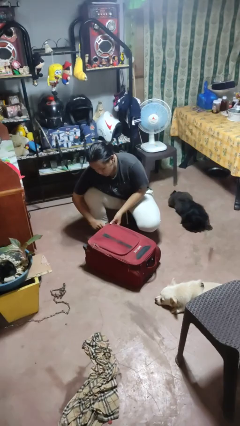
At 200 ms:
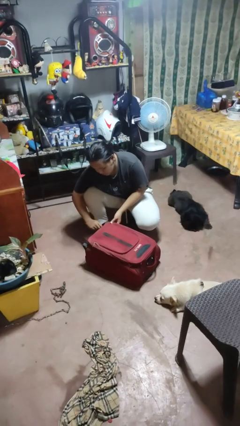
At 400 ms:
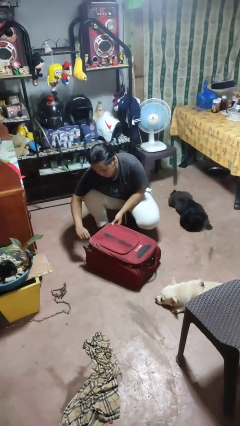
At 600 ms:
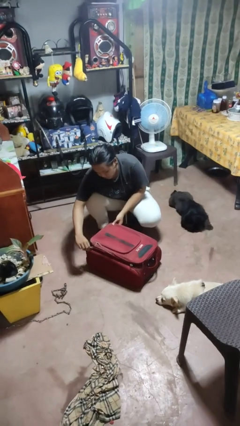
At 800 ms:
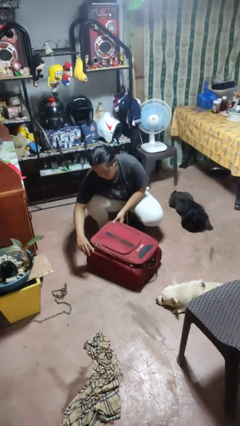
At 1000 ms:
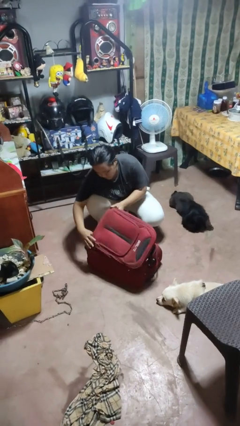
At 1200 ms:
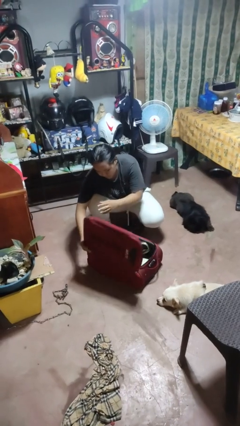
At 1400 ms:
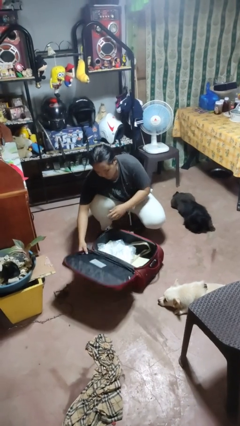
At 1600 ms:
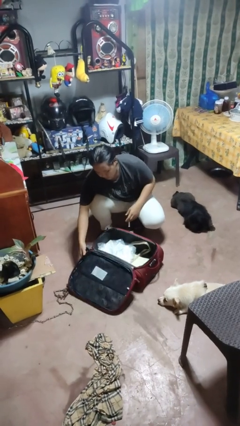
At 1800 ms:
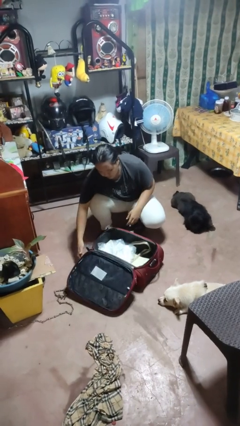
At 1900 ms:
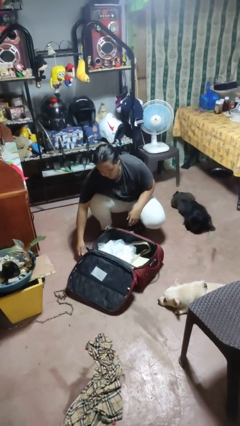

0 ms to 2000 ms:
person opens suitcase

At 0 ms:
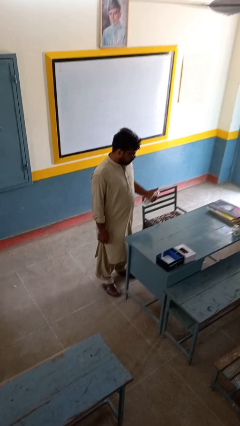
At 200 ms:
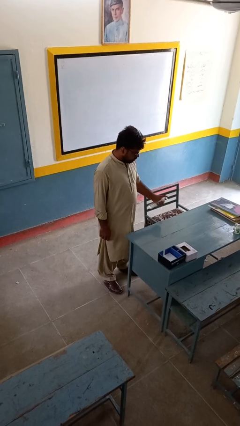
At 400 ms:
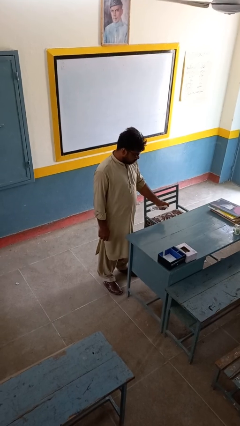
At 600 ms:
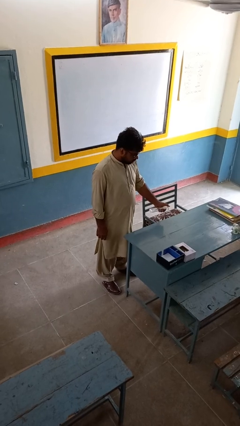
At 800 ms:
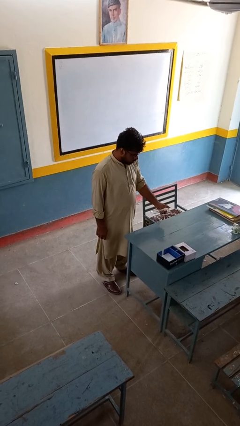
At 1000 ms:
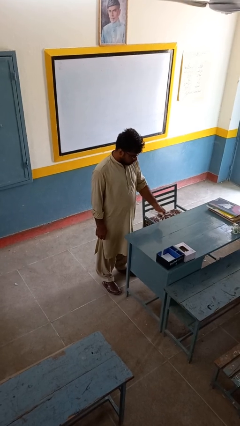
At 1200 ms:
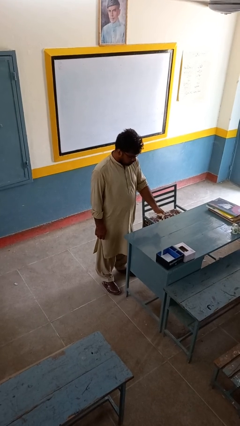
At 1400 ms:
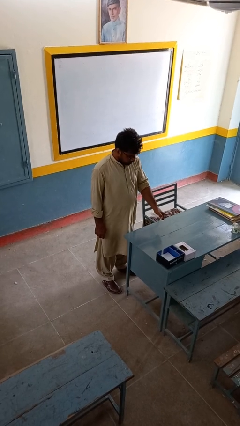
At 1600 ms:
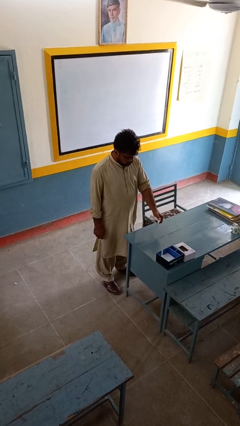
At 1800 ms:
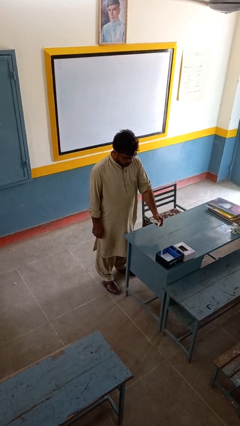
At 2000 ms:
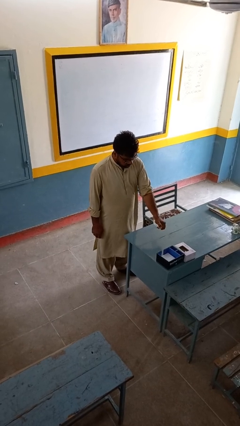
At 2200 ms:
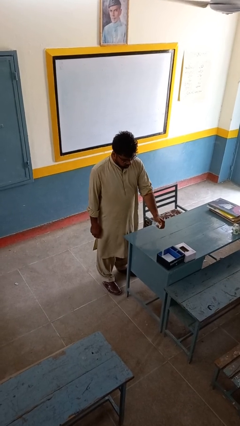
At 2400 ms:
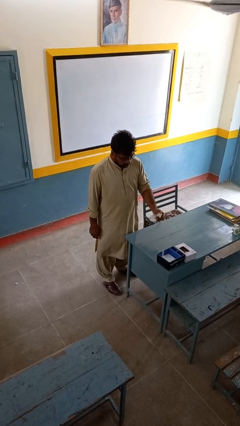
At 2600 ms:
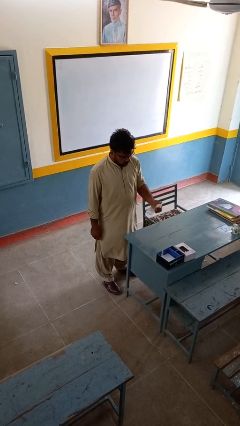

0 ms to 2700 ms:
person sprays from bottle

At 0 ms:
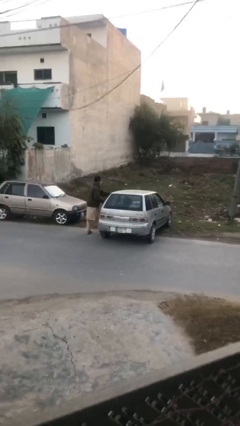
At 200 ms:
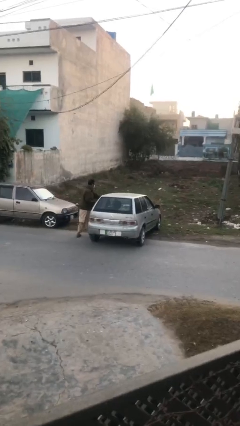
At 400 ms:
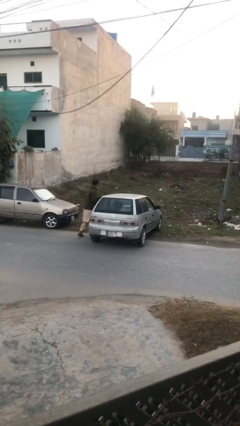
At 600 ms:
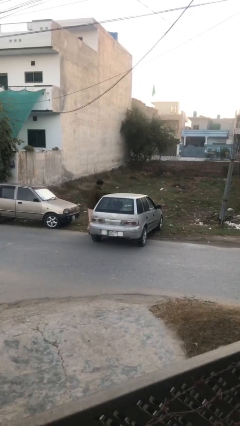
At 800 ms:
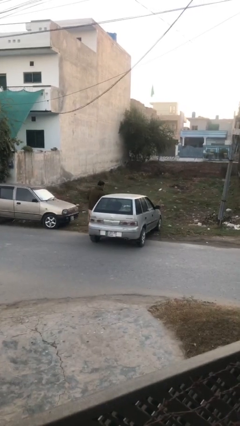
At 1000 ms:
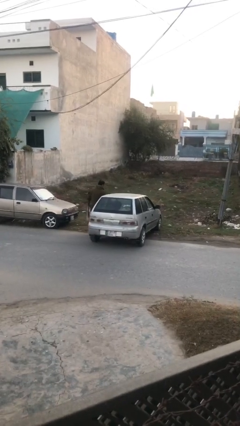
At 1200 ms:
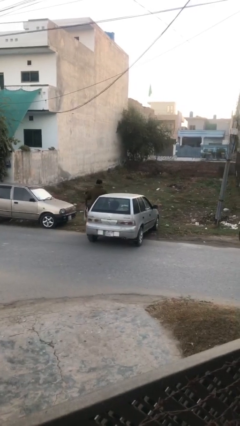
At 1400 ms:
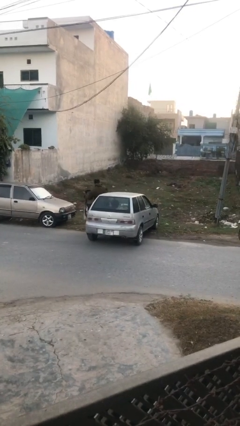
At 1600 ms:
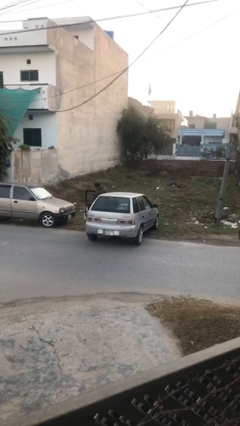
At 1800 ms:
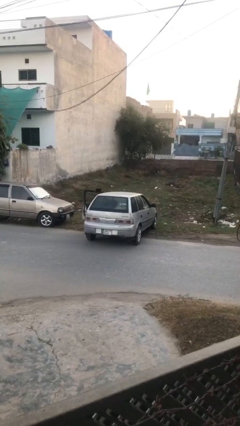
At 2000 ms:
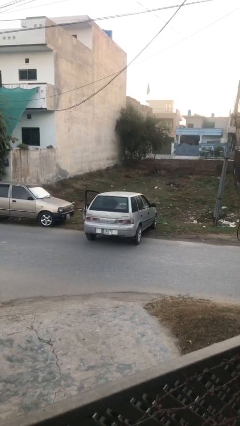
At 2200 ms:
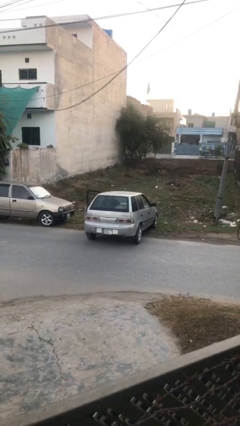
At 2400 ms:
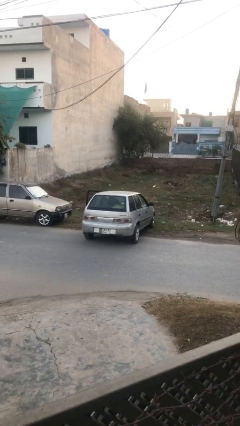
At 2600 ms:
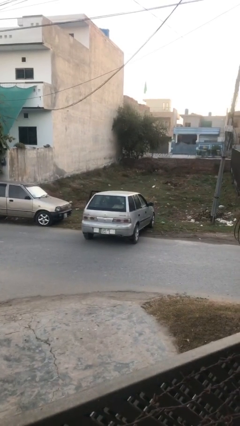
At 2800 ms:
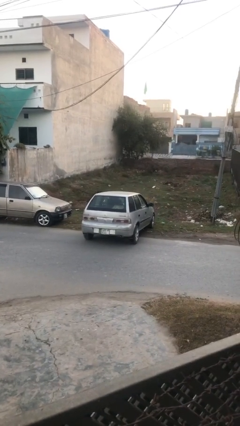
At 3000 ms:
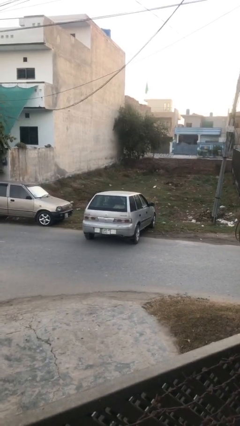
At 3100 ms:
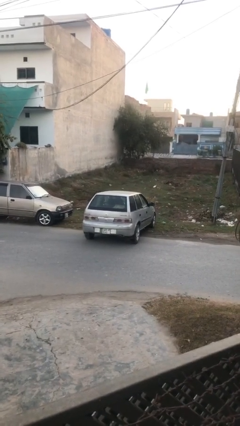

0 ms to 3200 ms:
car picks up person

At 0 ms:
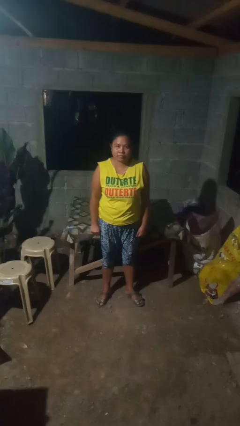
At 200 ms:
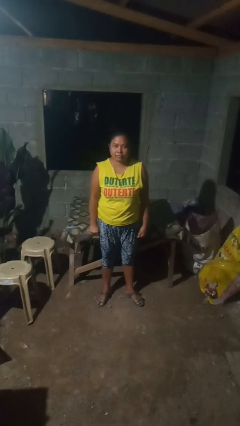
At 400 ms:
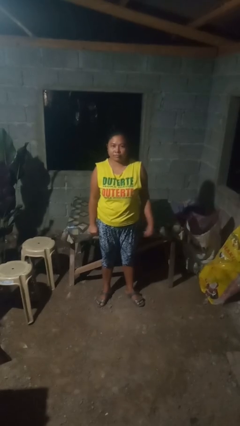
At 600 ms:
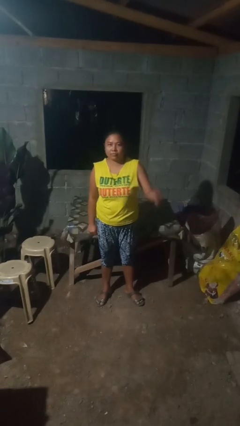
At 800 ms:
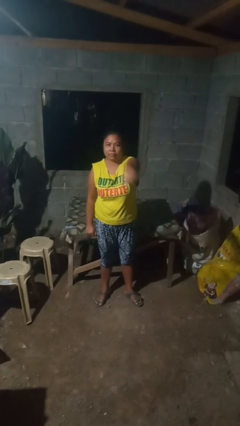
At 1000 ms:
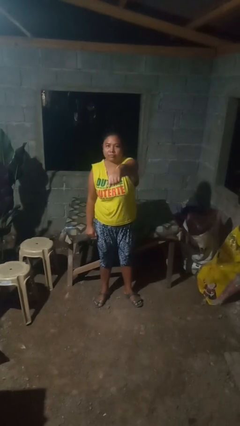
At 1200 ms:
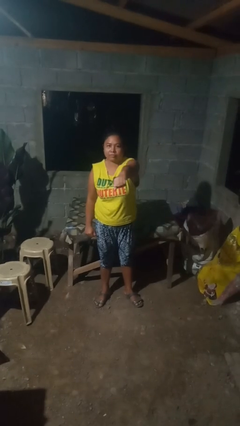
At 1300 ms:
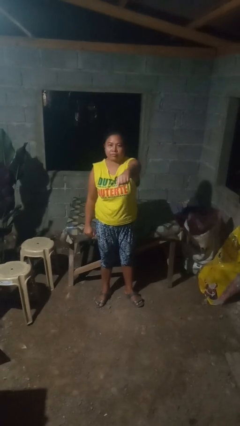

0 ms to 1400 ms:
person punches

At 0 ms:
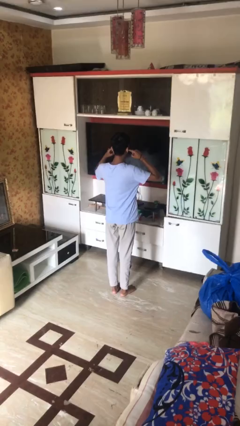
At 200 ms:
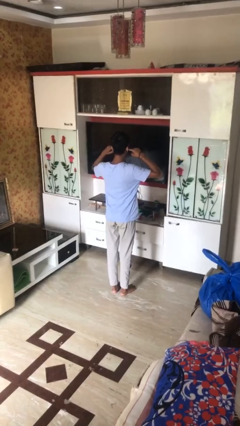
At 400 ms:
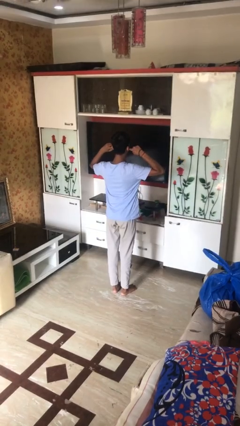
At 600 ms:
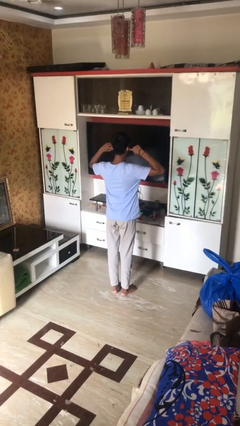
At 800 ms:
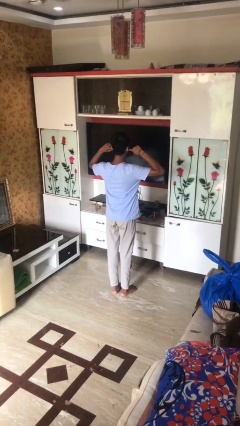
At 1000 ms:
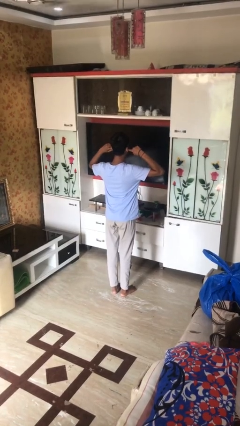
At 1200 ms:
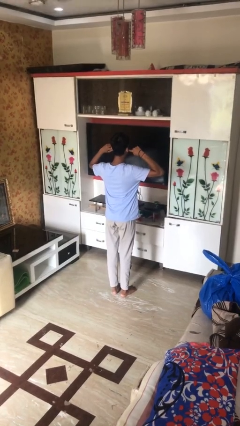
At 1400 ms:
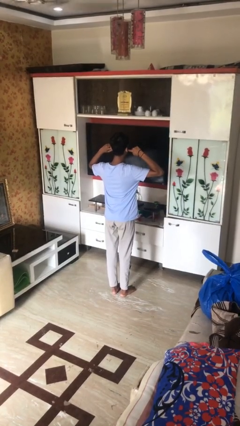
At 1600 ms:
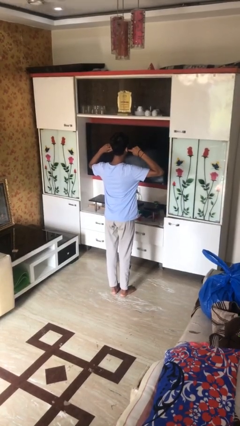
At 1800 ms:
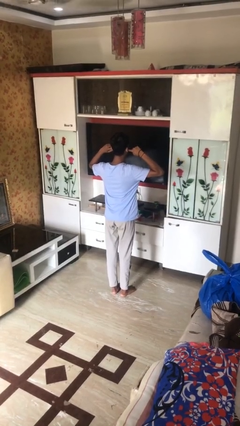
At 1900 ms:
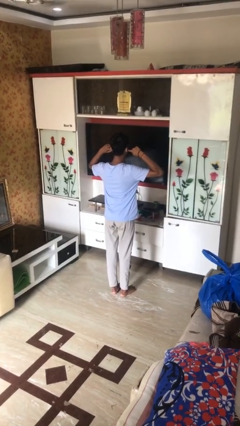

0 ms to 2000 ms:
person puts fingers in ear

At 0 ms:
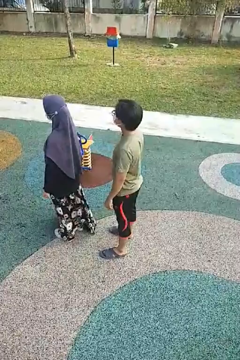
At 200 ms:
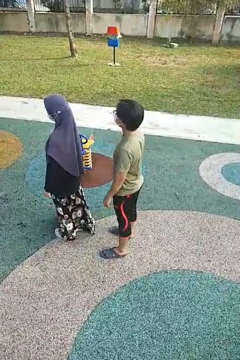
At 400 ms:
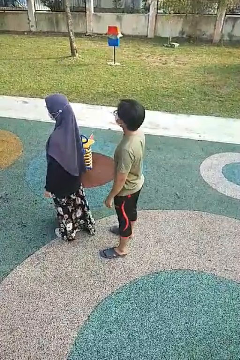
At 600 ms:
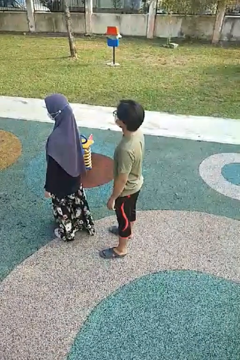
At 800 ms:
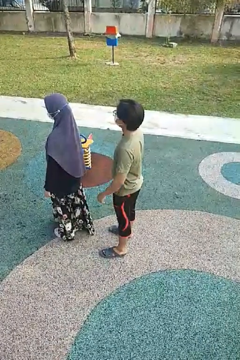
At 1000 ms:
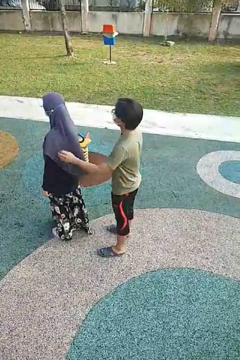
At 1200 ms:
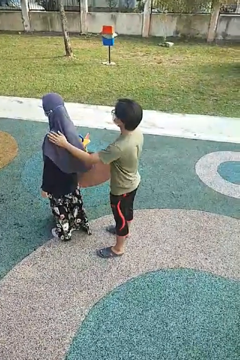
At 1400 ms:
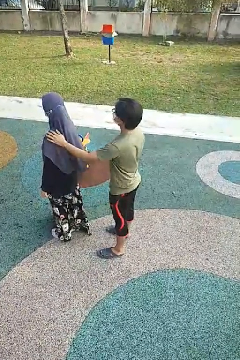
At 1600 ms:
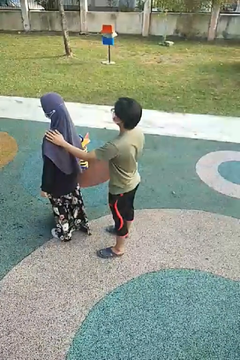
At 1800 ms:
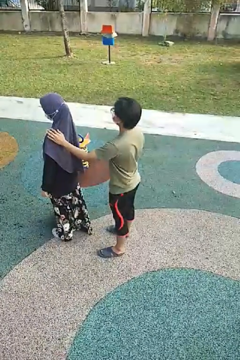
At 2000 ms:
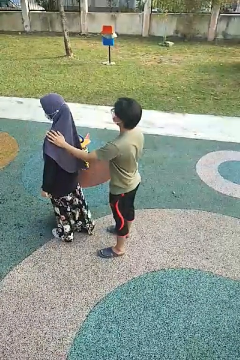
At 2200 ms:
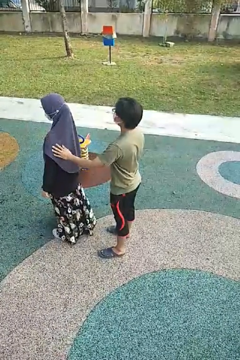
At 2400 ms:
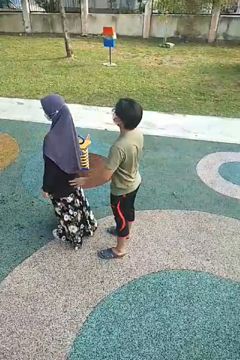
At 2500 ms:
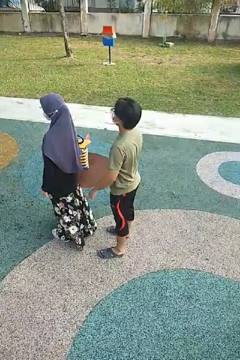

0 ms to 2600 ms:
person touches back of person

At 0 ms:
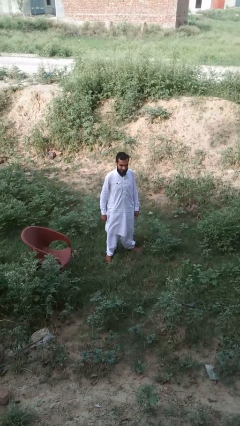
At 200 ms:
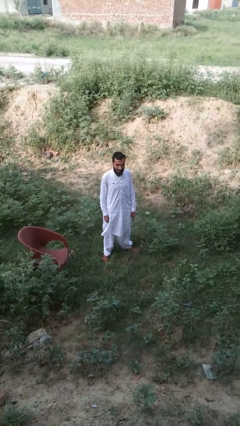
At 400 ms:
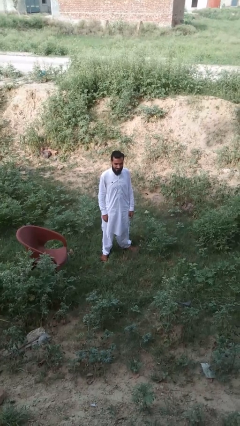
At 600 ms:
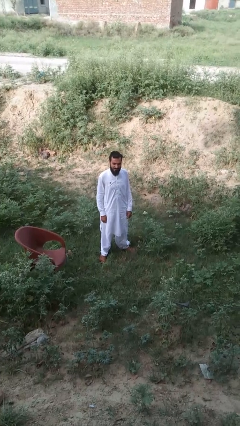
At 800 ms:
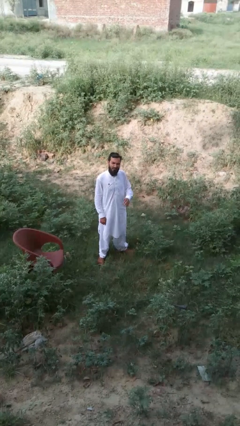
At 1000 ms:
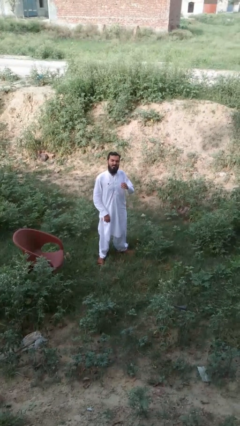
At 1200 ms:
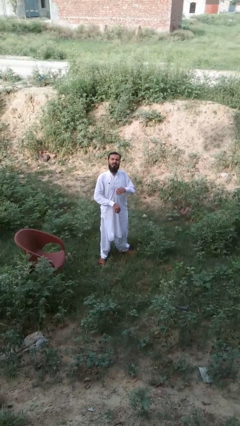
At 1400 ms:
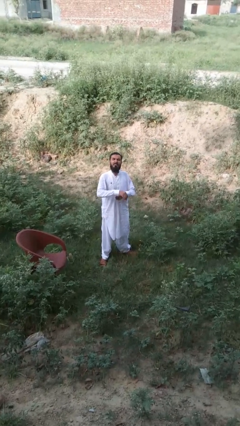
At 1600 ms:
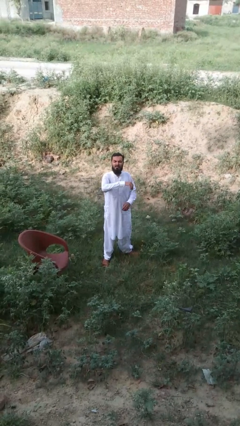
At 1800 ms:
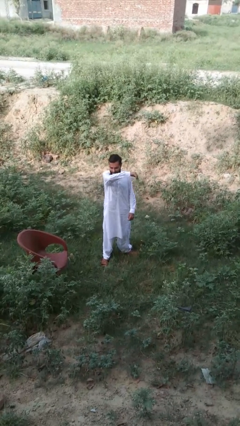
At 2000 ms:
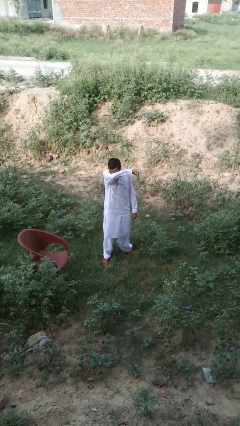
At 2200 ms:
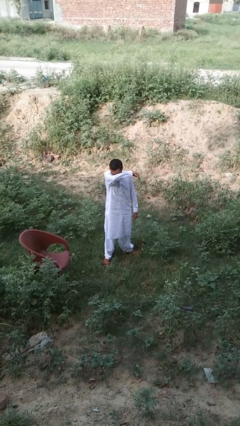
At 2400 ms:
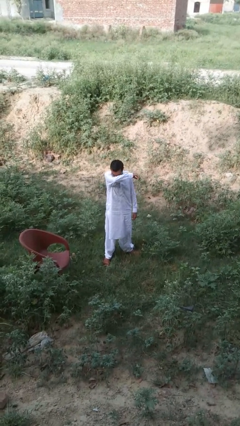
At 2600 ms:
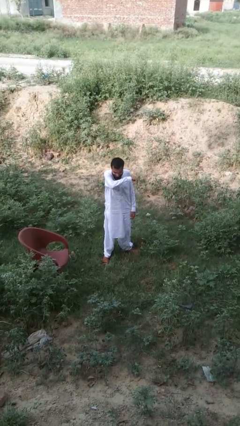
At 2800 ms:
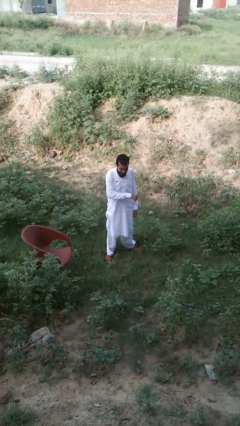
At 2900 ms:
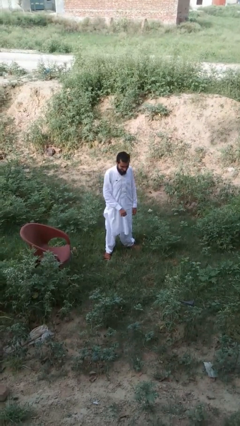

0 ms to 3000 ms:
person sneezes into arm

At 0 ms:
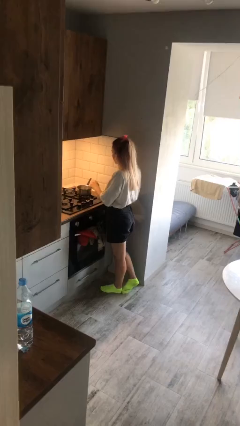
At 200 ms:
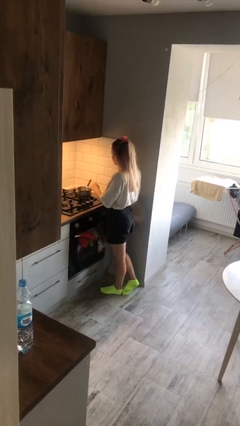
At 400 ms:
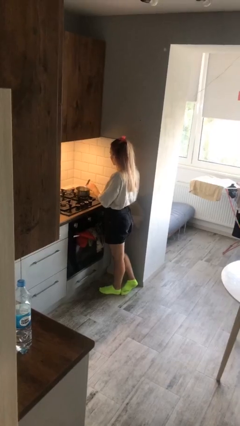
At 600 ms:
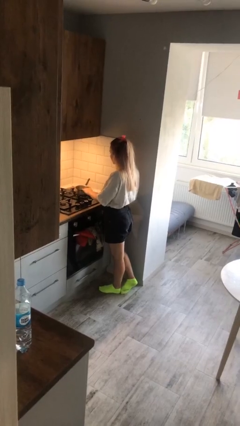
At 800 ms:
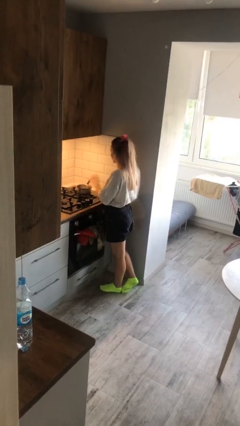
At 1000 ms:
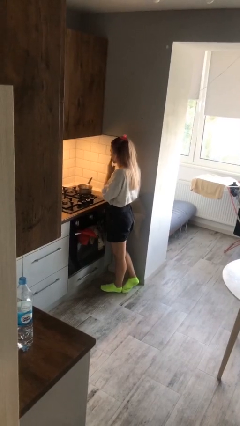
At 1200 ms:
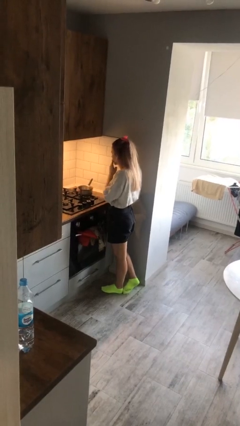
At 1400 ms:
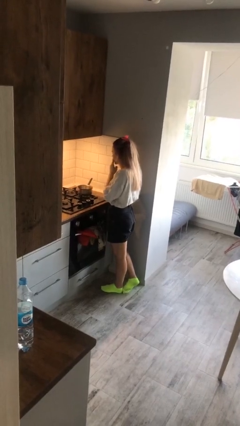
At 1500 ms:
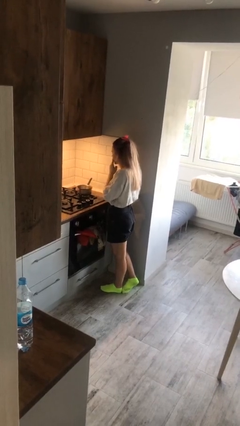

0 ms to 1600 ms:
person burns hand
